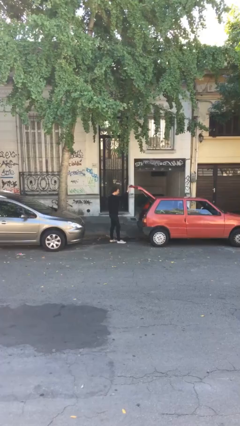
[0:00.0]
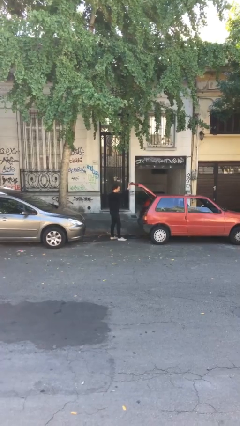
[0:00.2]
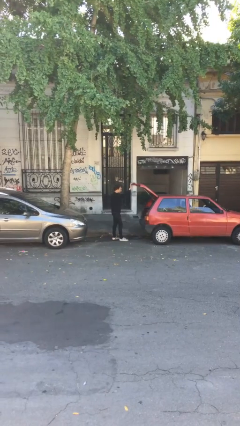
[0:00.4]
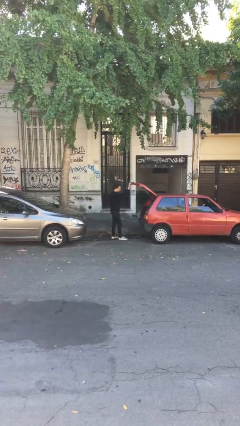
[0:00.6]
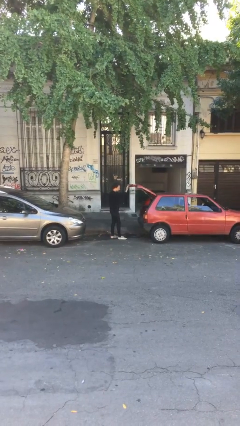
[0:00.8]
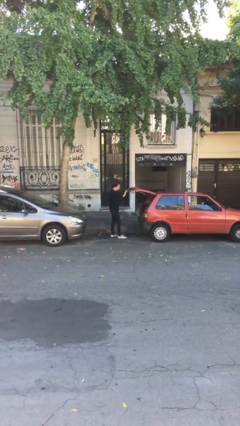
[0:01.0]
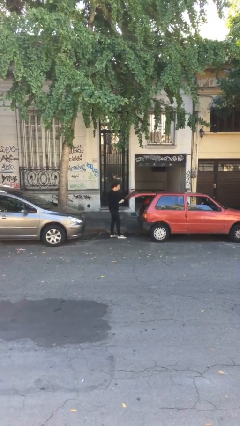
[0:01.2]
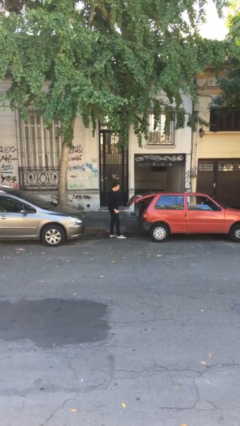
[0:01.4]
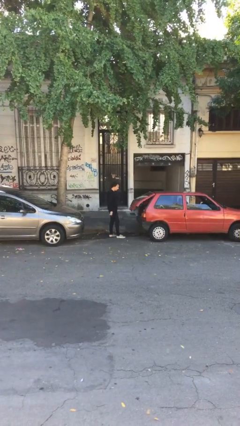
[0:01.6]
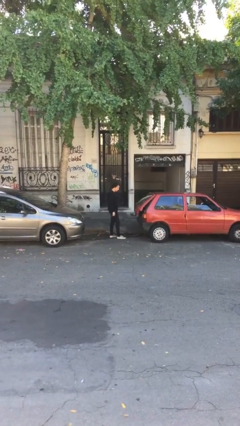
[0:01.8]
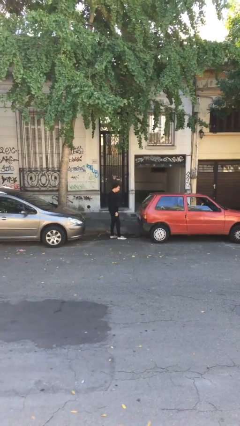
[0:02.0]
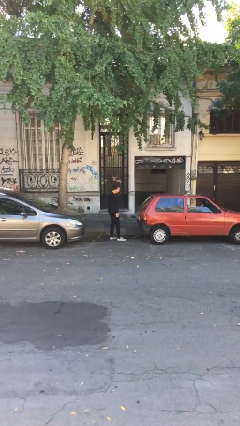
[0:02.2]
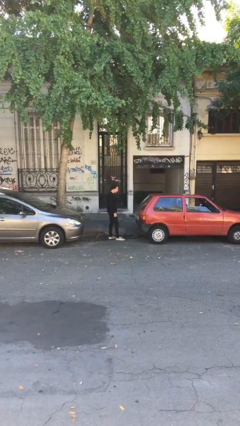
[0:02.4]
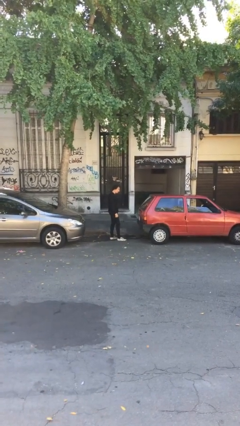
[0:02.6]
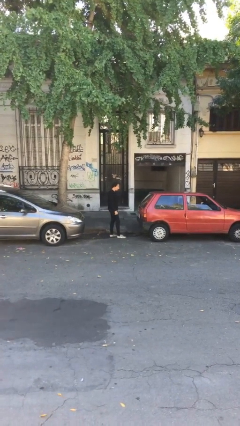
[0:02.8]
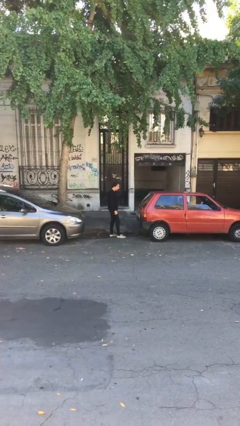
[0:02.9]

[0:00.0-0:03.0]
person closes car trunk

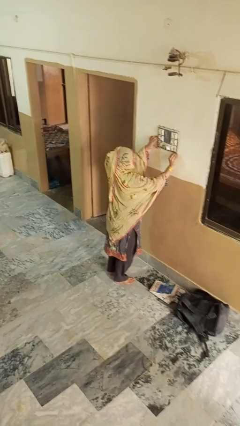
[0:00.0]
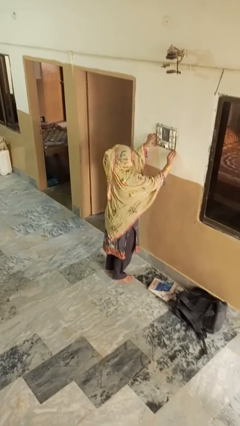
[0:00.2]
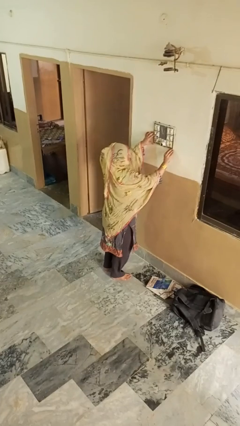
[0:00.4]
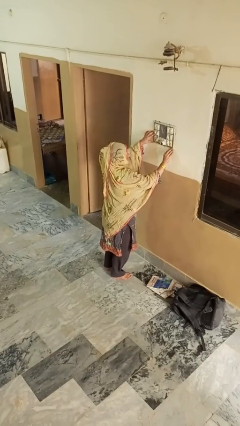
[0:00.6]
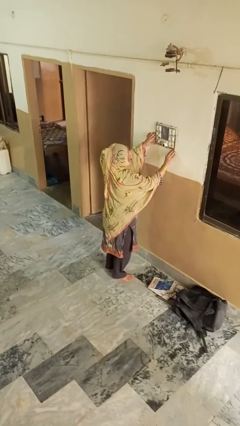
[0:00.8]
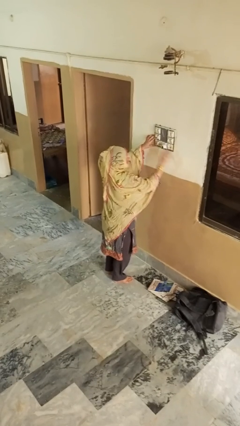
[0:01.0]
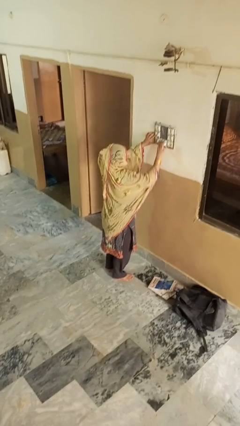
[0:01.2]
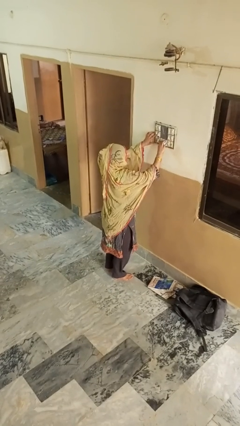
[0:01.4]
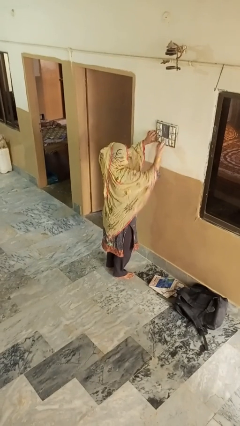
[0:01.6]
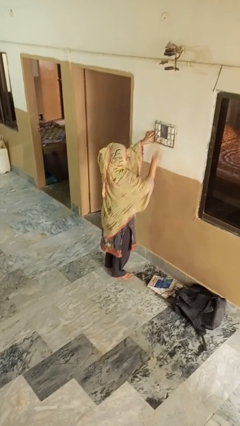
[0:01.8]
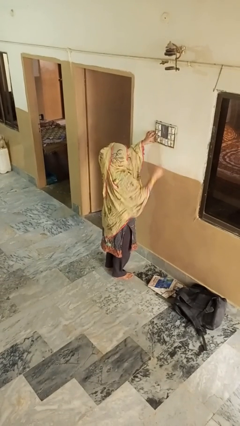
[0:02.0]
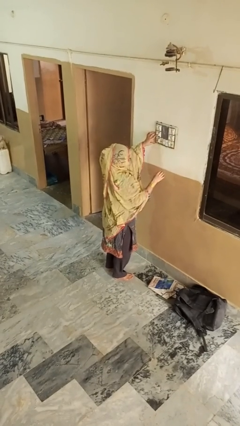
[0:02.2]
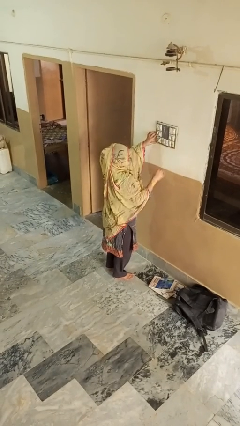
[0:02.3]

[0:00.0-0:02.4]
person unplugs from electrical socket

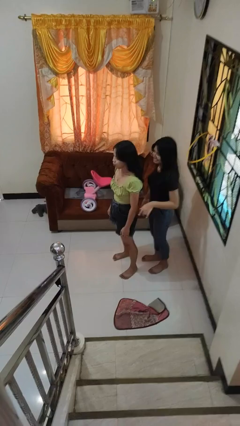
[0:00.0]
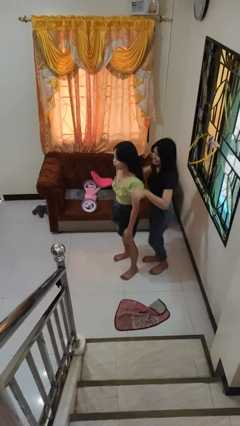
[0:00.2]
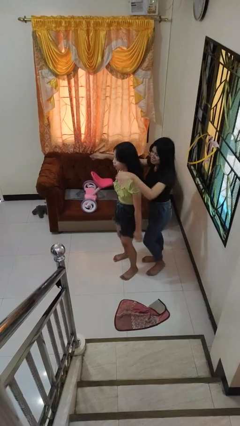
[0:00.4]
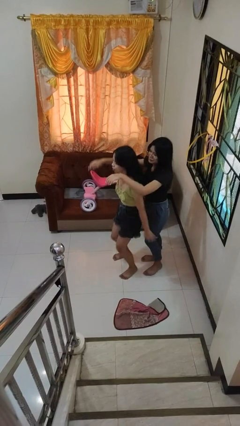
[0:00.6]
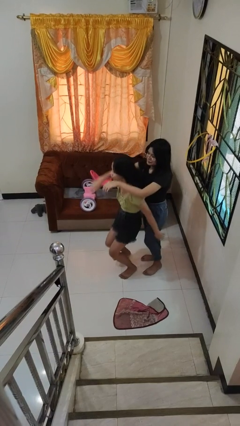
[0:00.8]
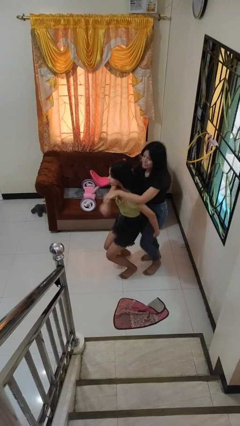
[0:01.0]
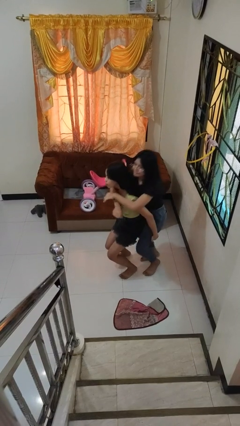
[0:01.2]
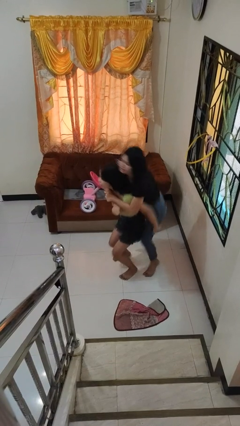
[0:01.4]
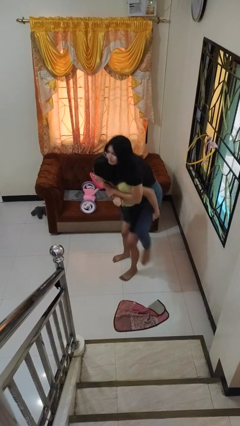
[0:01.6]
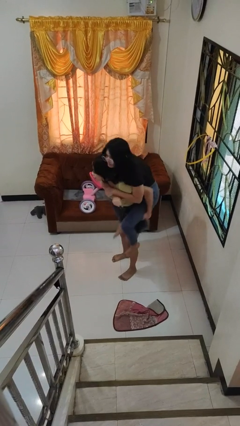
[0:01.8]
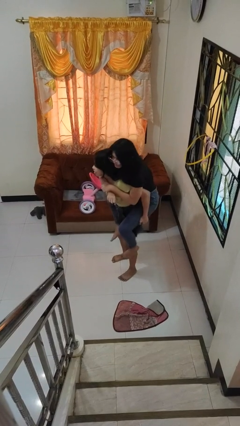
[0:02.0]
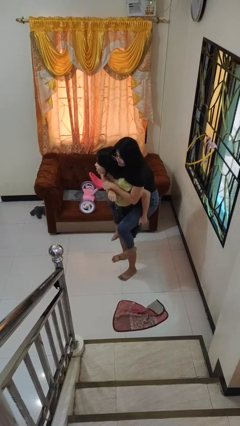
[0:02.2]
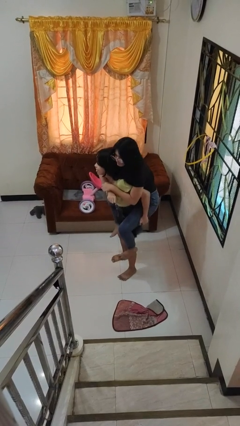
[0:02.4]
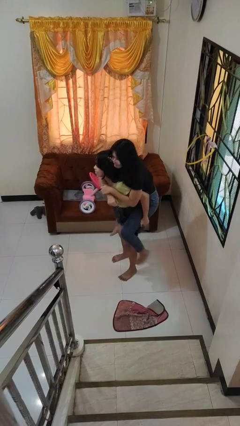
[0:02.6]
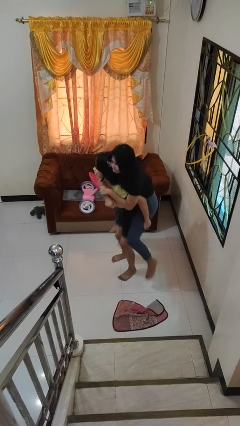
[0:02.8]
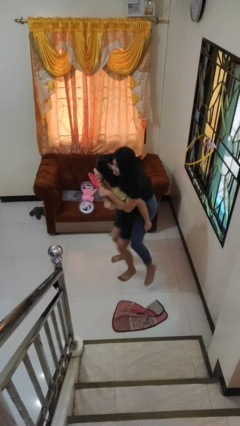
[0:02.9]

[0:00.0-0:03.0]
person carries person over shoulder

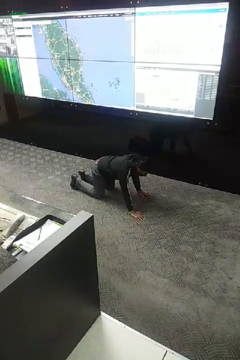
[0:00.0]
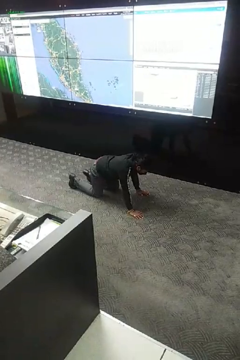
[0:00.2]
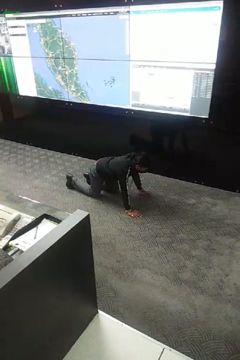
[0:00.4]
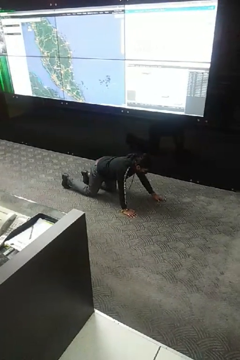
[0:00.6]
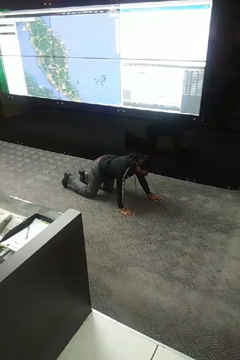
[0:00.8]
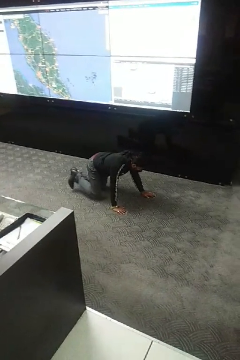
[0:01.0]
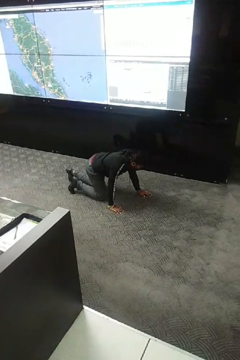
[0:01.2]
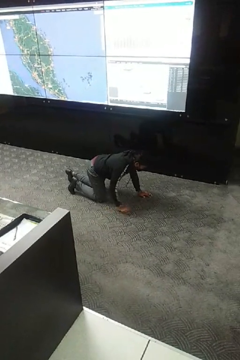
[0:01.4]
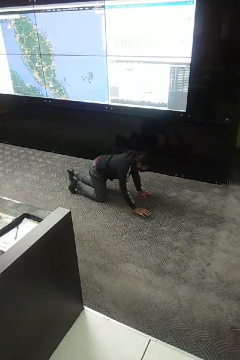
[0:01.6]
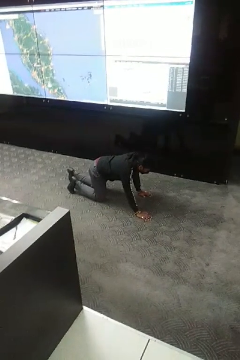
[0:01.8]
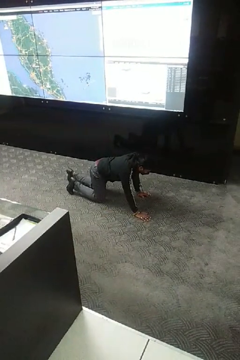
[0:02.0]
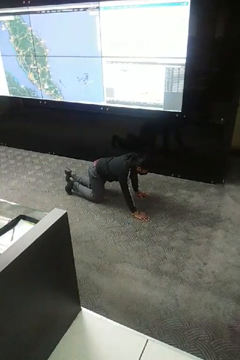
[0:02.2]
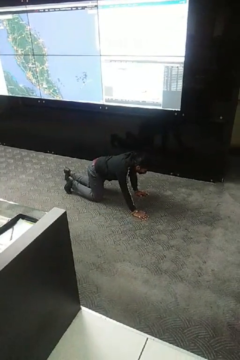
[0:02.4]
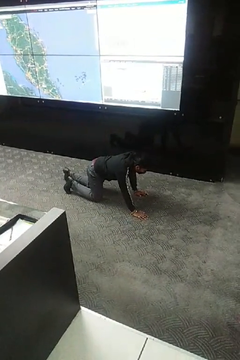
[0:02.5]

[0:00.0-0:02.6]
person crawls

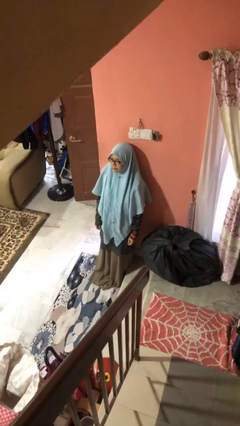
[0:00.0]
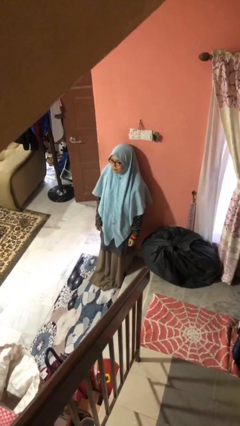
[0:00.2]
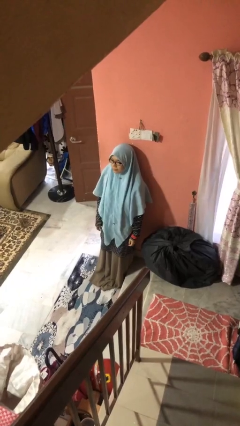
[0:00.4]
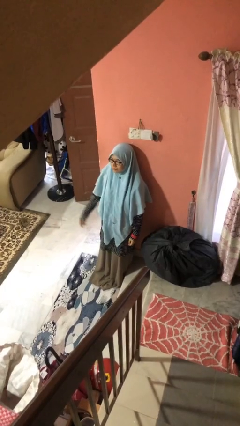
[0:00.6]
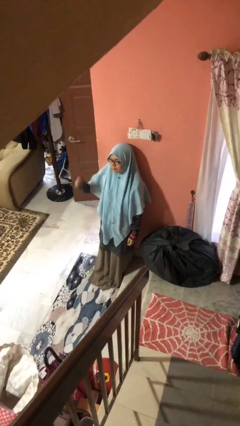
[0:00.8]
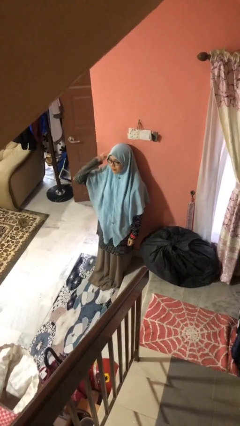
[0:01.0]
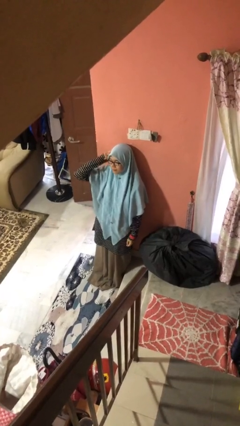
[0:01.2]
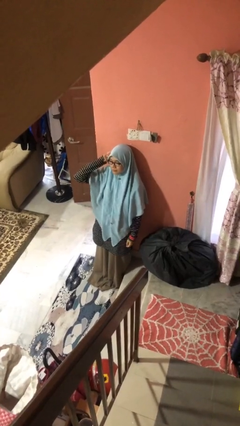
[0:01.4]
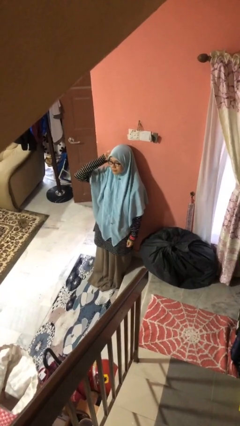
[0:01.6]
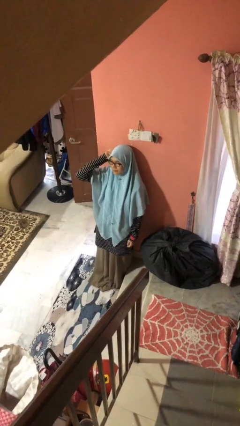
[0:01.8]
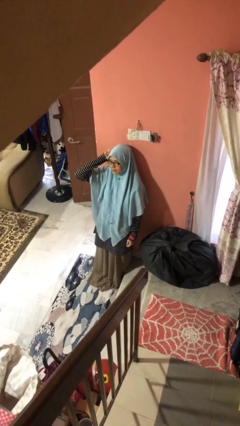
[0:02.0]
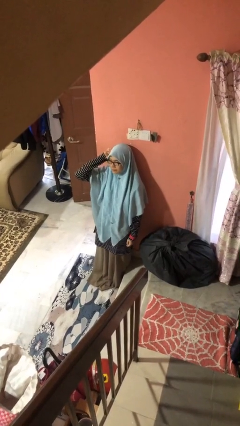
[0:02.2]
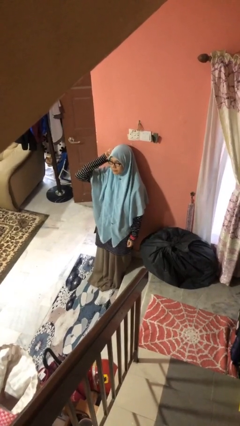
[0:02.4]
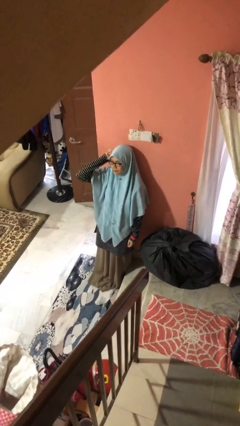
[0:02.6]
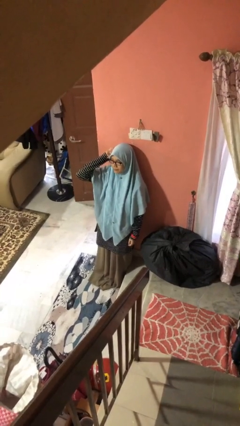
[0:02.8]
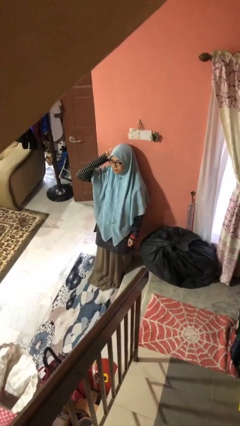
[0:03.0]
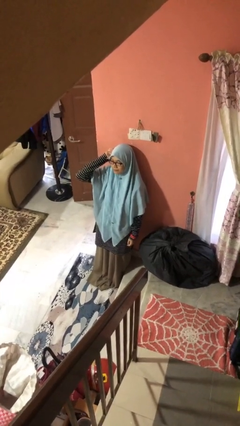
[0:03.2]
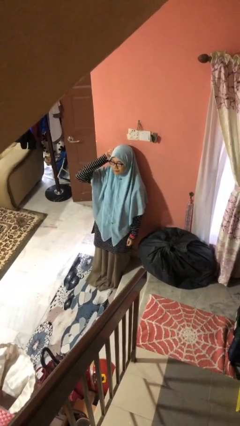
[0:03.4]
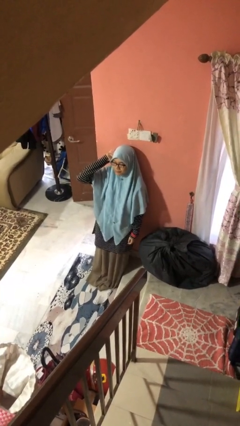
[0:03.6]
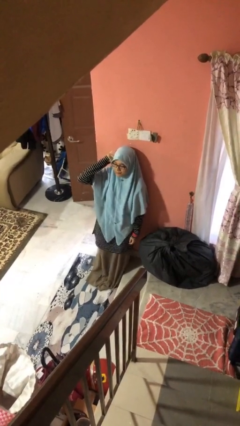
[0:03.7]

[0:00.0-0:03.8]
person scratches face

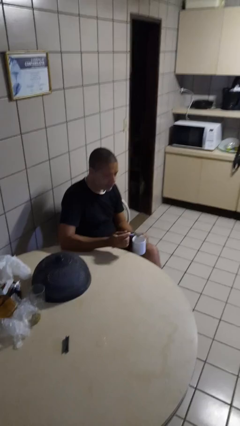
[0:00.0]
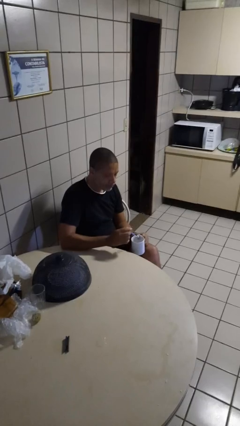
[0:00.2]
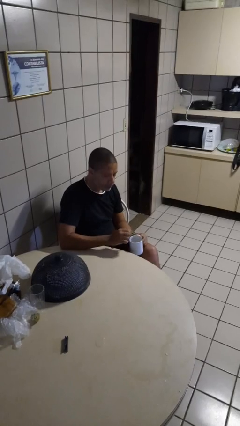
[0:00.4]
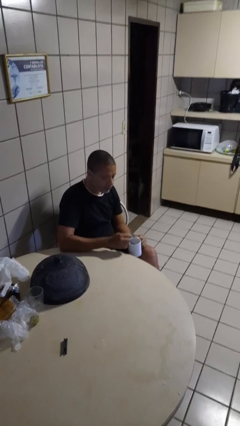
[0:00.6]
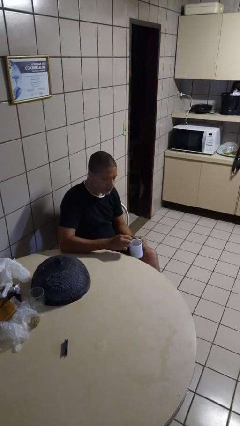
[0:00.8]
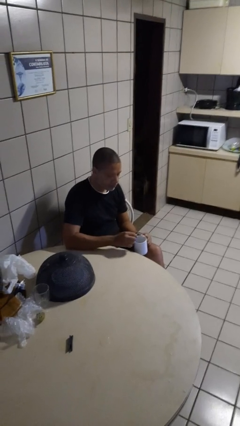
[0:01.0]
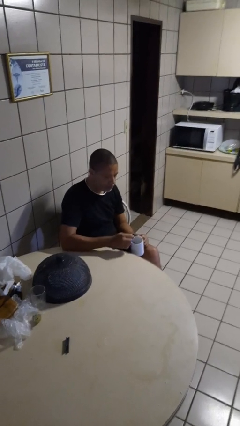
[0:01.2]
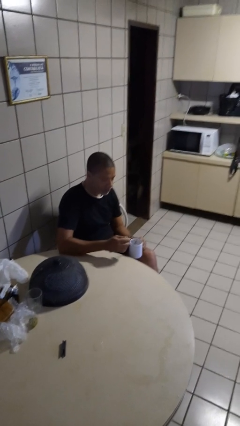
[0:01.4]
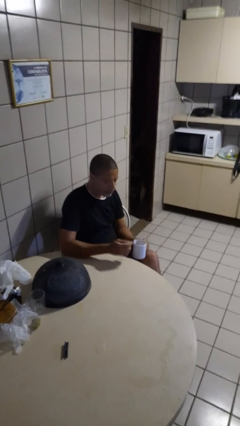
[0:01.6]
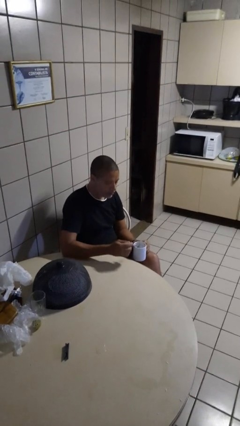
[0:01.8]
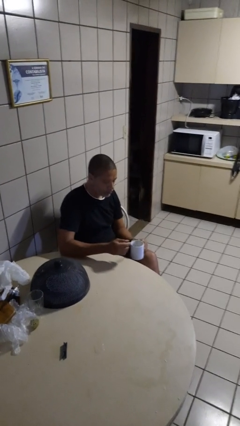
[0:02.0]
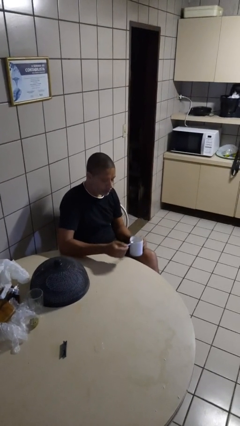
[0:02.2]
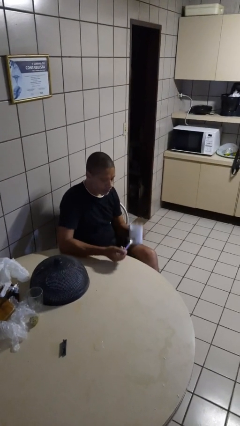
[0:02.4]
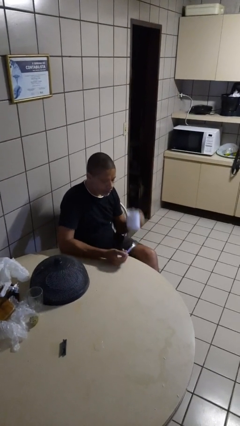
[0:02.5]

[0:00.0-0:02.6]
person stirs mug

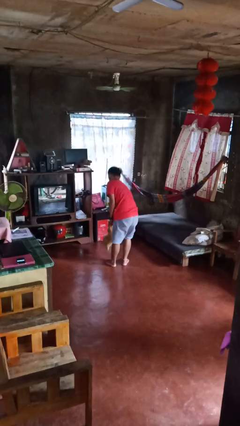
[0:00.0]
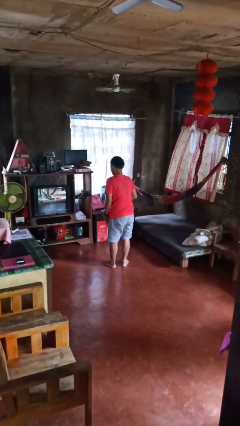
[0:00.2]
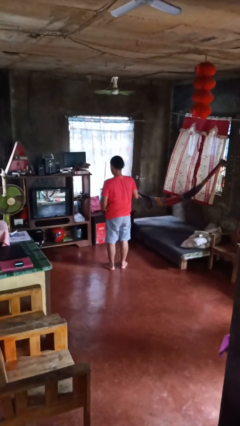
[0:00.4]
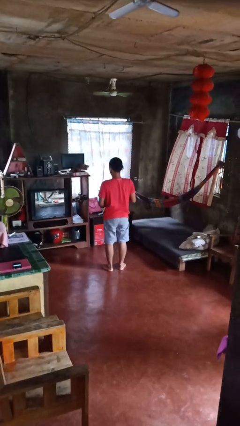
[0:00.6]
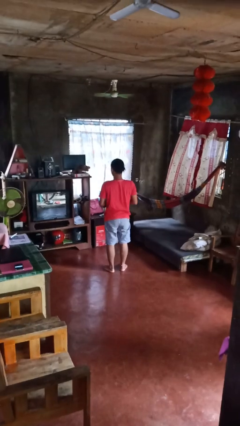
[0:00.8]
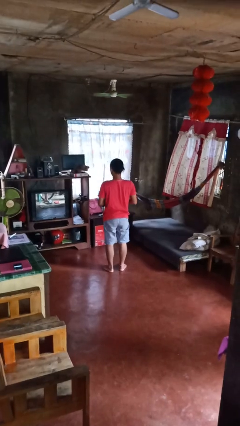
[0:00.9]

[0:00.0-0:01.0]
person picks up object from floor
